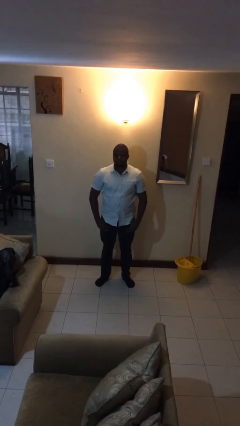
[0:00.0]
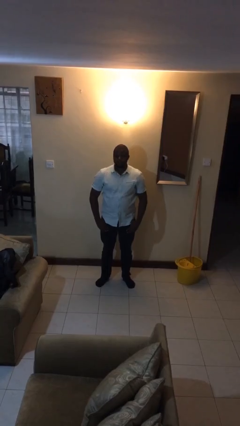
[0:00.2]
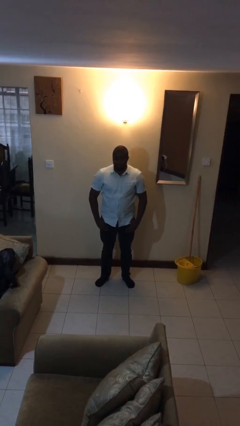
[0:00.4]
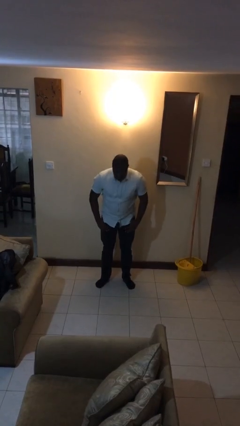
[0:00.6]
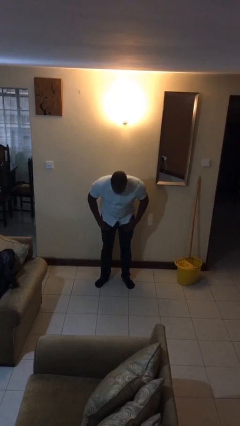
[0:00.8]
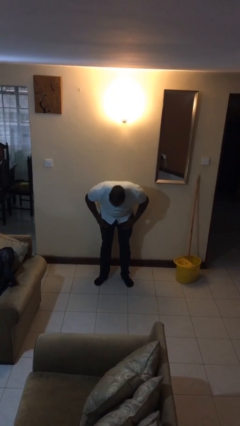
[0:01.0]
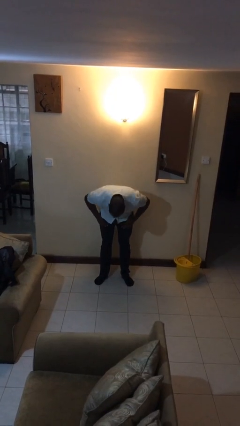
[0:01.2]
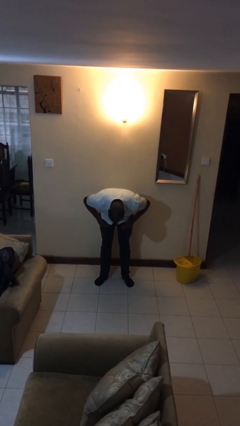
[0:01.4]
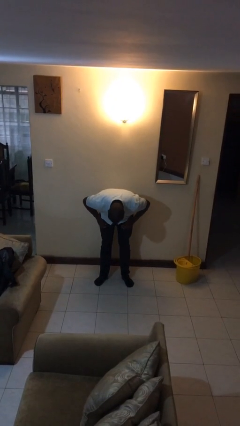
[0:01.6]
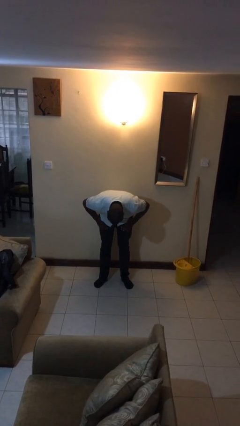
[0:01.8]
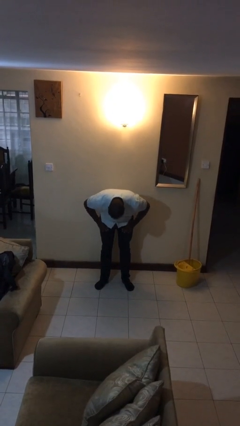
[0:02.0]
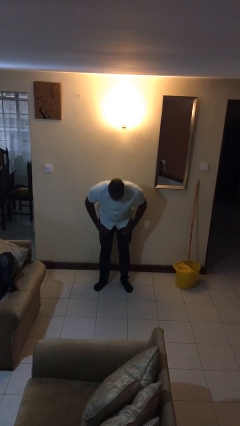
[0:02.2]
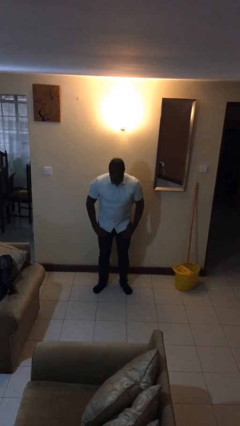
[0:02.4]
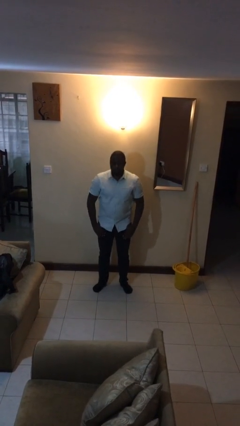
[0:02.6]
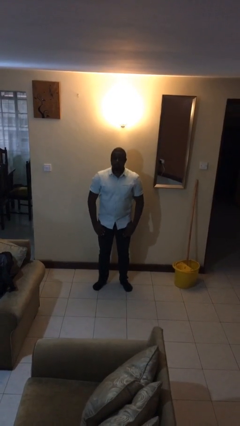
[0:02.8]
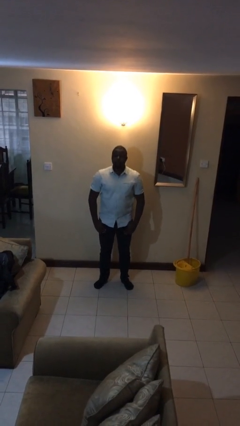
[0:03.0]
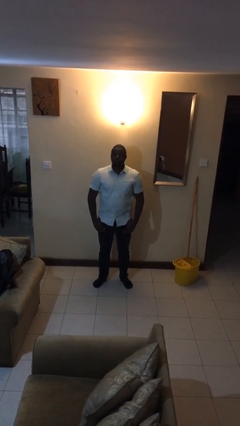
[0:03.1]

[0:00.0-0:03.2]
person bows

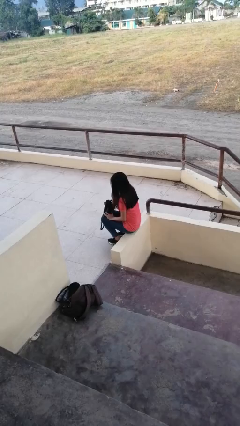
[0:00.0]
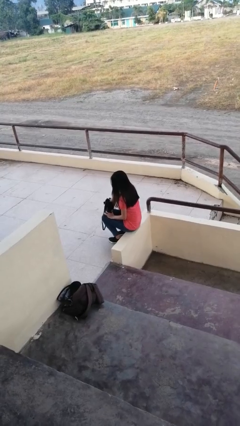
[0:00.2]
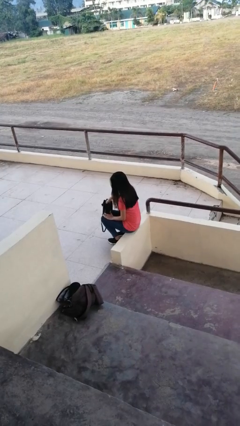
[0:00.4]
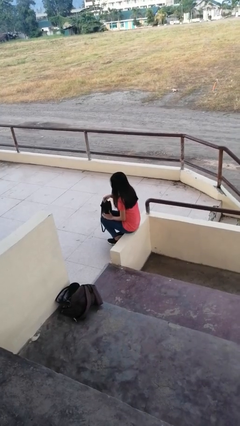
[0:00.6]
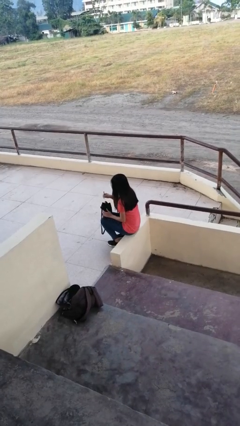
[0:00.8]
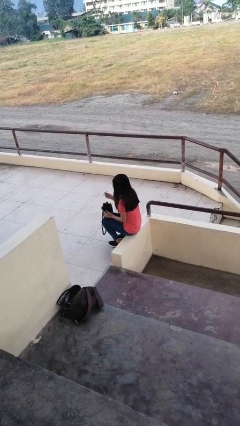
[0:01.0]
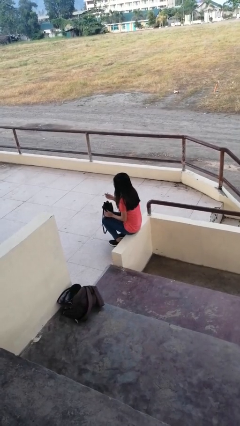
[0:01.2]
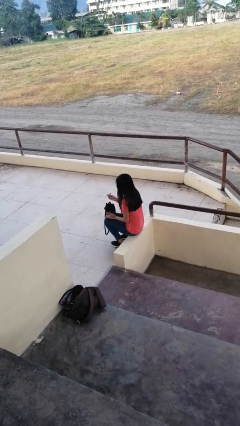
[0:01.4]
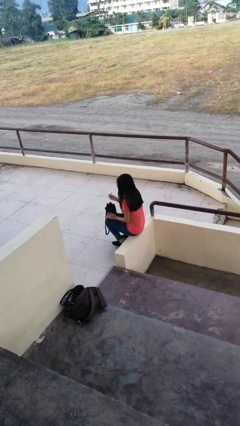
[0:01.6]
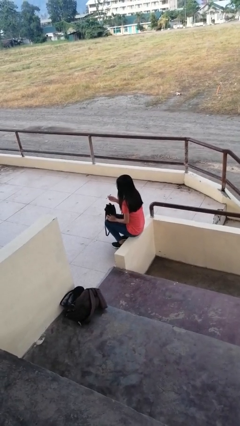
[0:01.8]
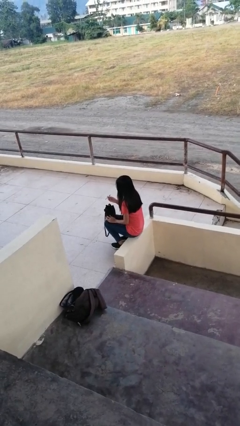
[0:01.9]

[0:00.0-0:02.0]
person takes object from purse

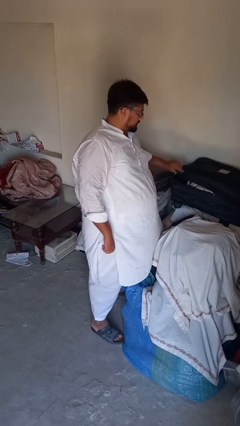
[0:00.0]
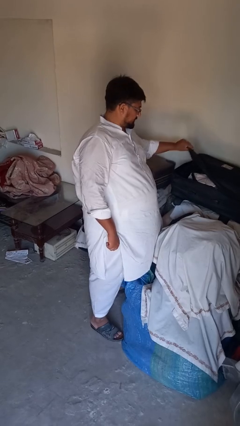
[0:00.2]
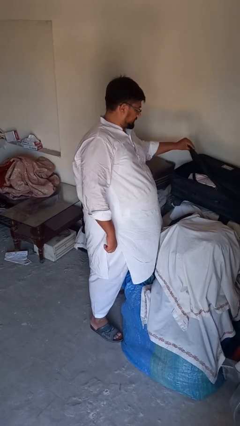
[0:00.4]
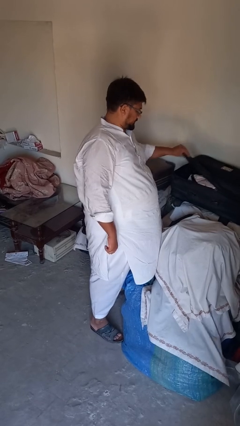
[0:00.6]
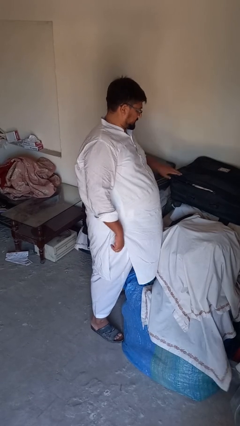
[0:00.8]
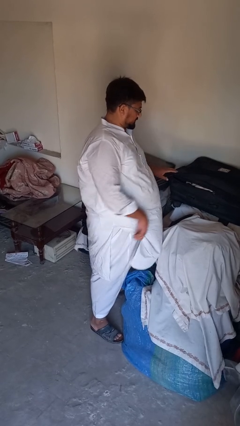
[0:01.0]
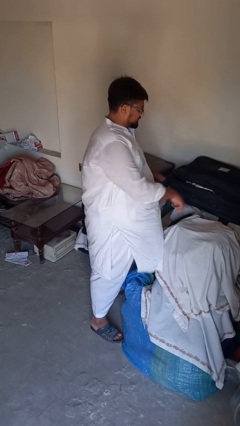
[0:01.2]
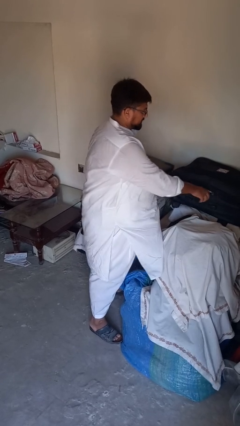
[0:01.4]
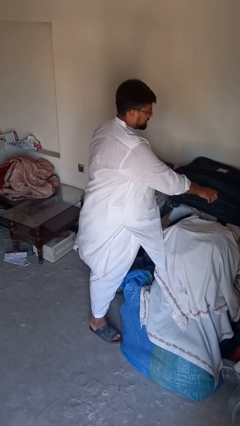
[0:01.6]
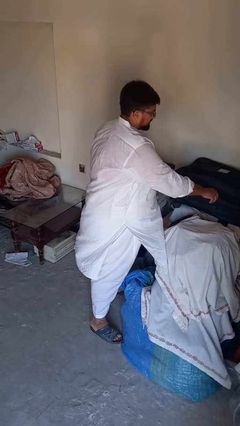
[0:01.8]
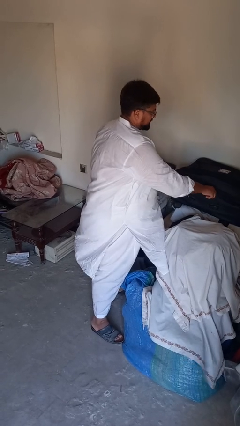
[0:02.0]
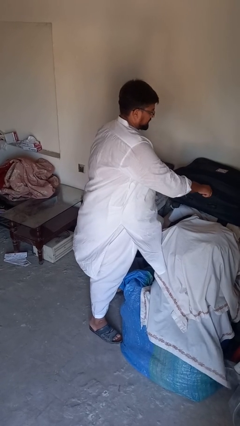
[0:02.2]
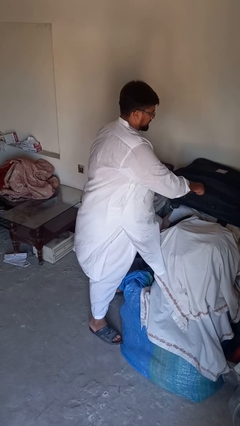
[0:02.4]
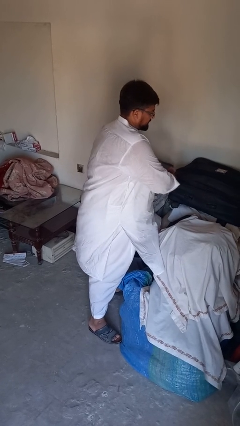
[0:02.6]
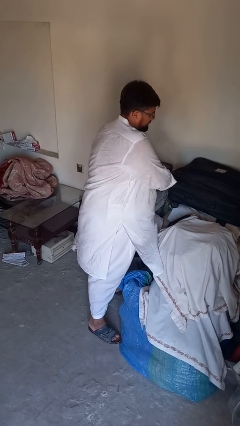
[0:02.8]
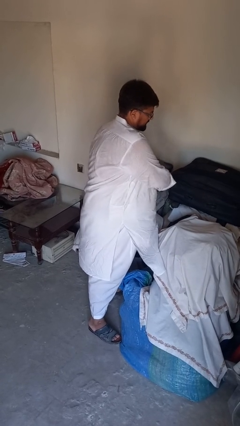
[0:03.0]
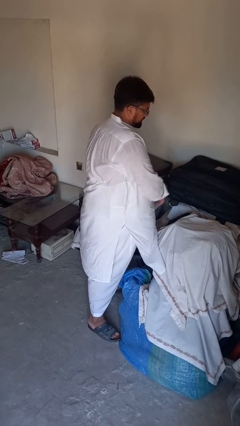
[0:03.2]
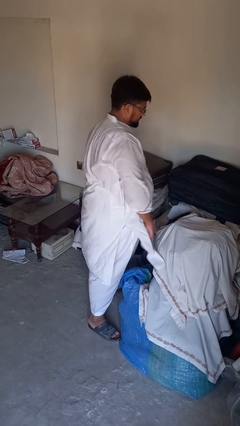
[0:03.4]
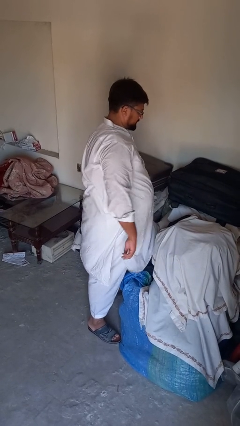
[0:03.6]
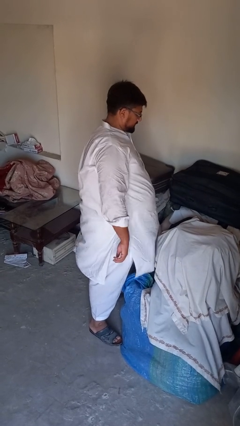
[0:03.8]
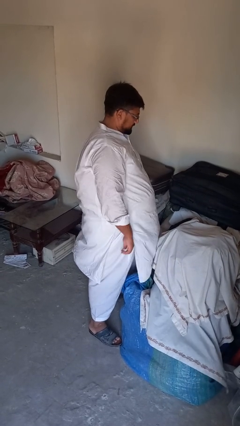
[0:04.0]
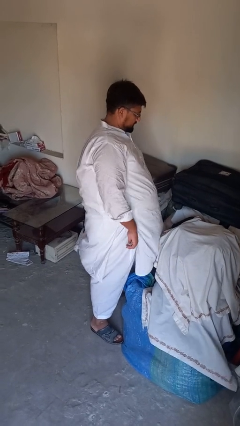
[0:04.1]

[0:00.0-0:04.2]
person closes suitcase

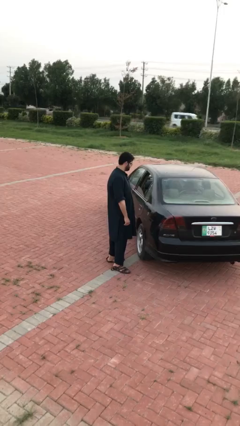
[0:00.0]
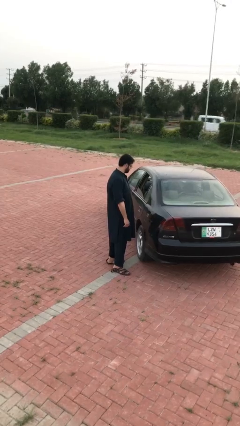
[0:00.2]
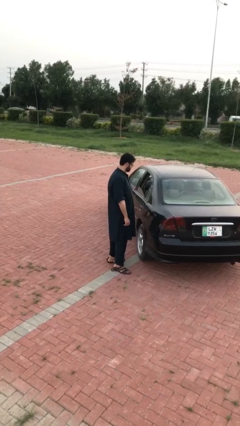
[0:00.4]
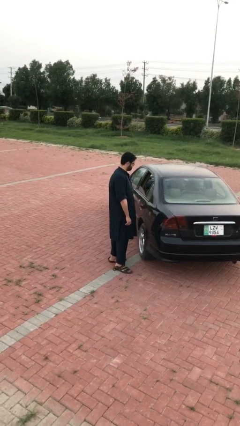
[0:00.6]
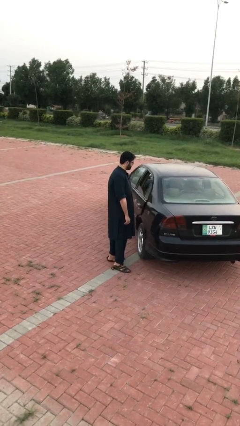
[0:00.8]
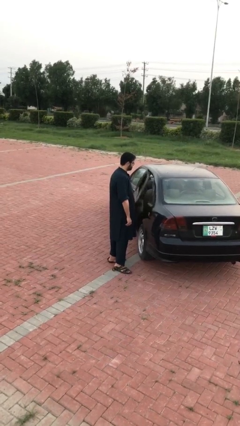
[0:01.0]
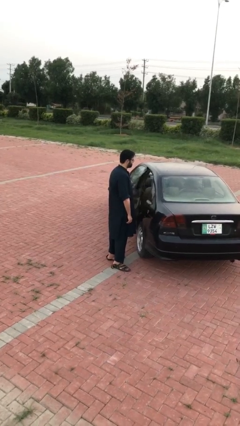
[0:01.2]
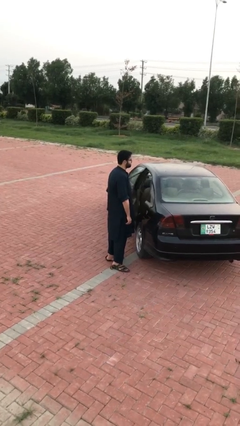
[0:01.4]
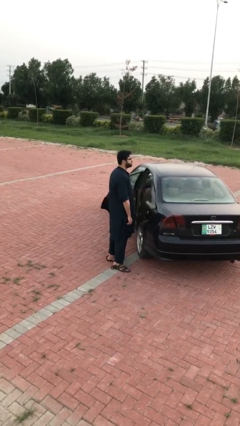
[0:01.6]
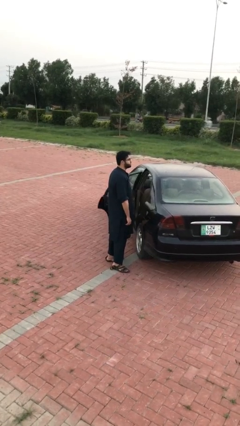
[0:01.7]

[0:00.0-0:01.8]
person opens car door

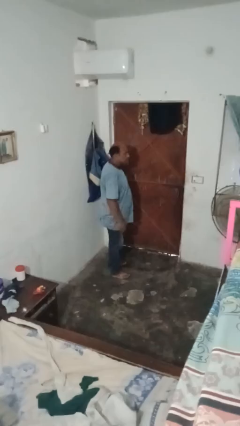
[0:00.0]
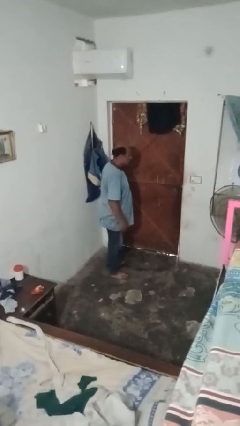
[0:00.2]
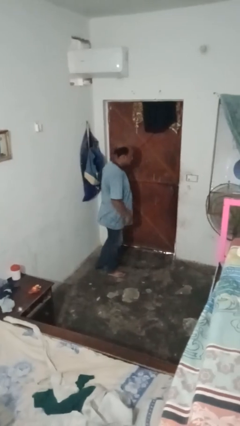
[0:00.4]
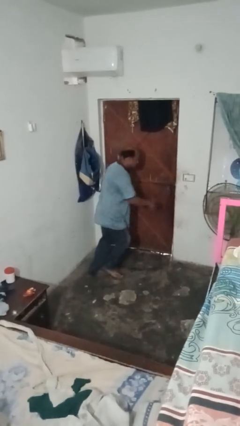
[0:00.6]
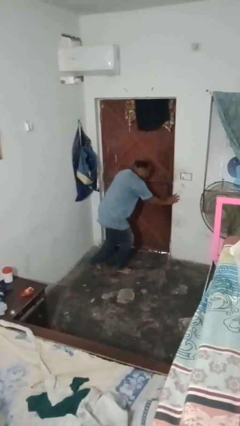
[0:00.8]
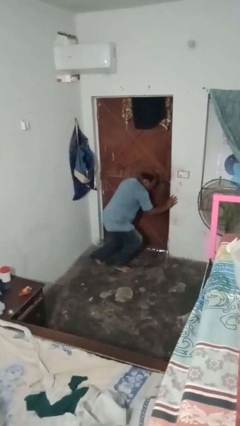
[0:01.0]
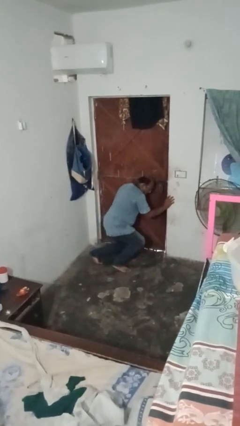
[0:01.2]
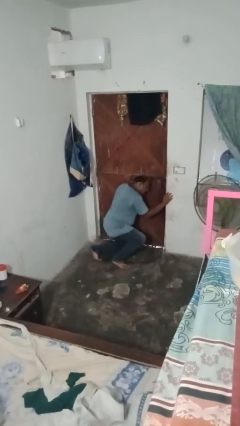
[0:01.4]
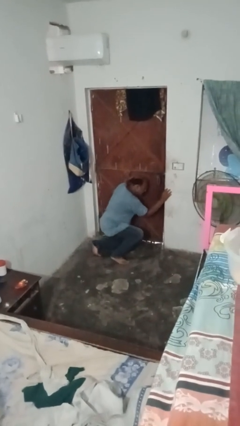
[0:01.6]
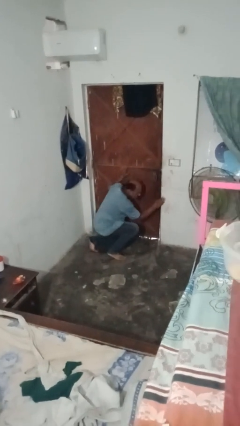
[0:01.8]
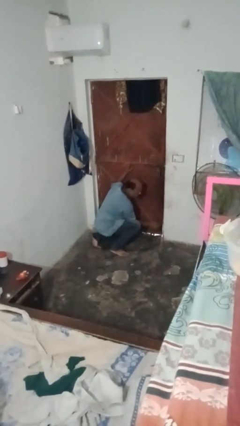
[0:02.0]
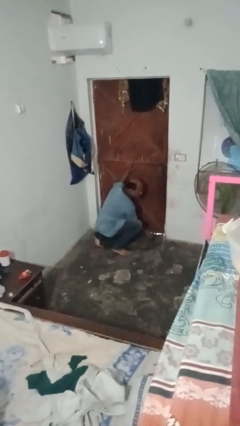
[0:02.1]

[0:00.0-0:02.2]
person bumps into wall

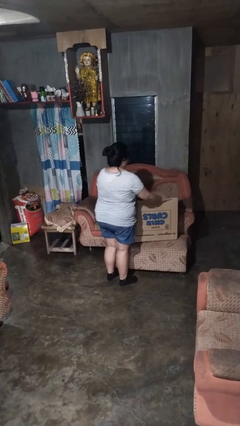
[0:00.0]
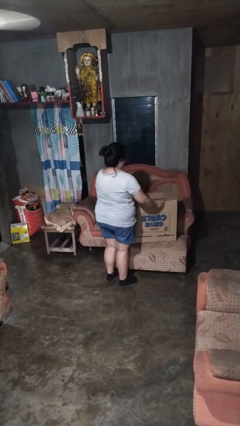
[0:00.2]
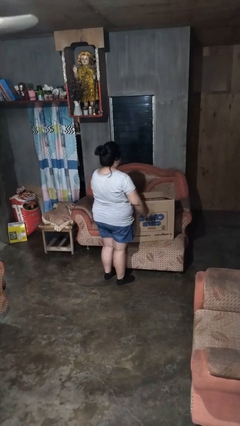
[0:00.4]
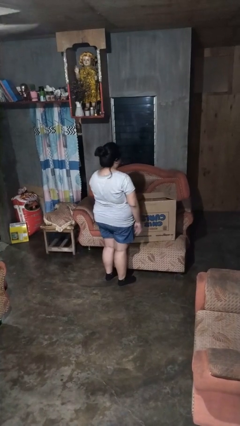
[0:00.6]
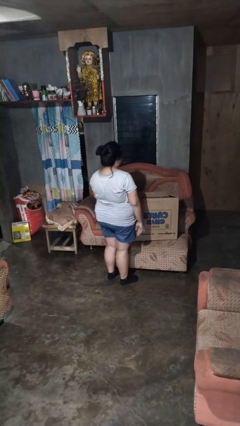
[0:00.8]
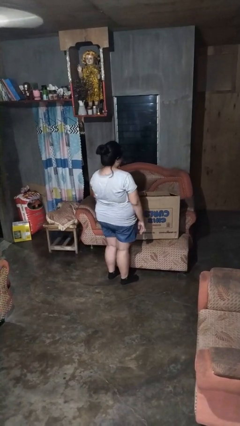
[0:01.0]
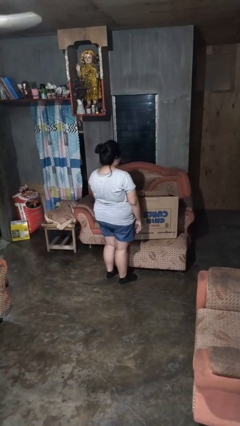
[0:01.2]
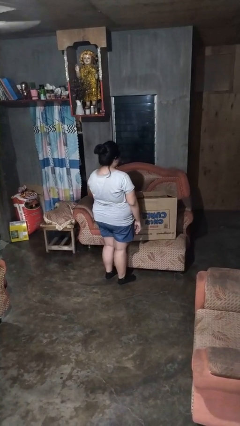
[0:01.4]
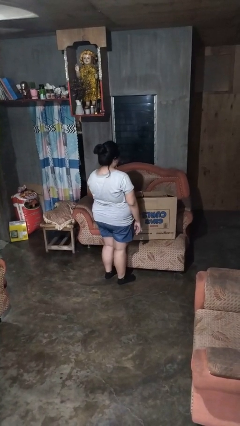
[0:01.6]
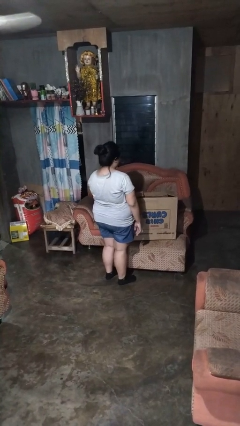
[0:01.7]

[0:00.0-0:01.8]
person opens box

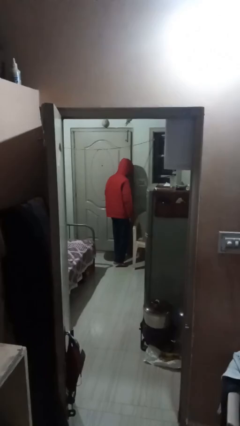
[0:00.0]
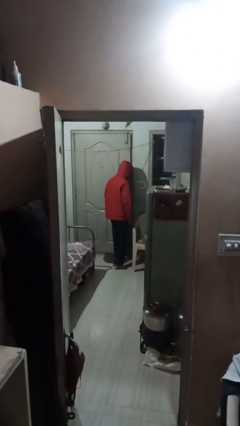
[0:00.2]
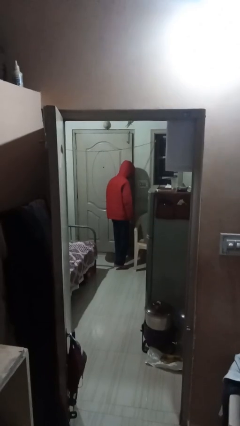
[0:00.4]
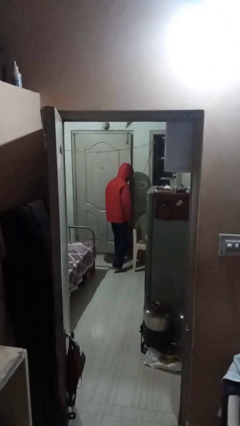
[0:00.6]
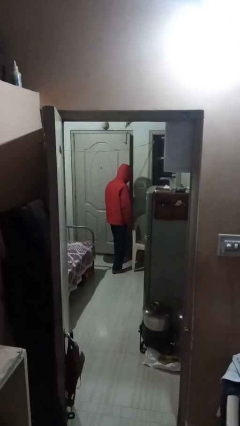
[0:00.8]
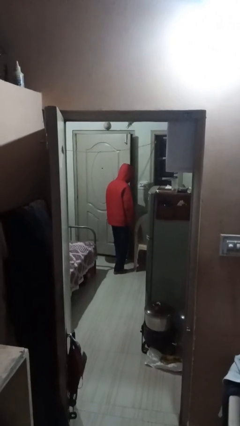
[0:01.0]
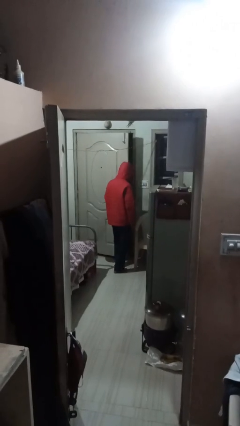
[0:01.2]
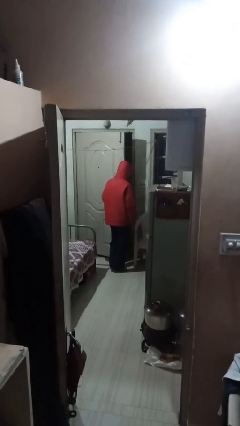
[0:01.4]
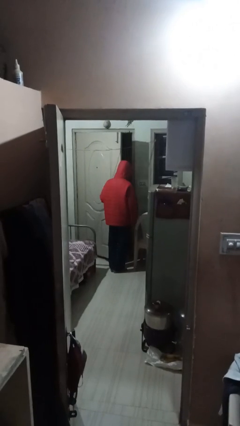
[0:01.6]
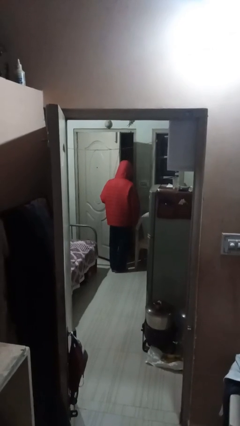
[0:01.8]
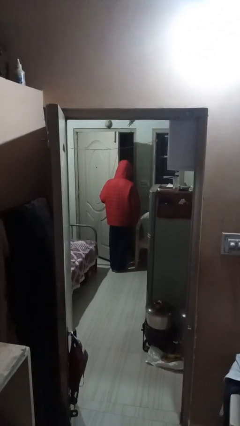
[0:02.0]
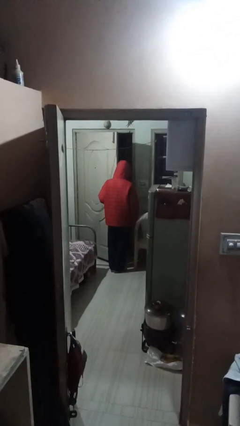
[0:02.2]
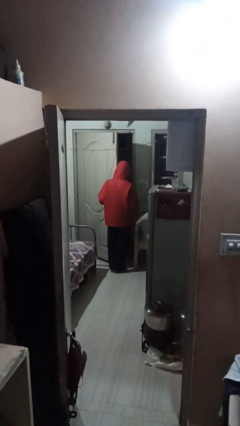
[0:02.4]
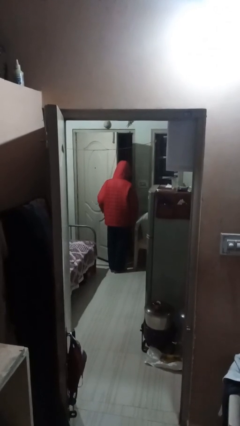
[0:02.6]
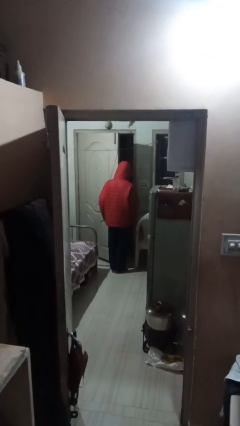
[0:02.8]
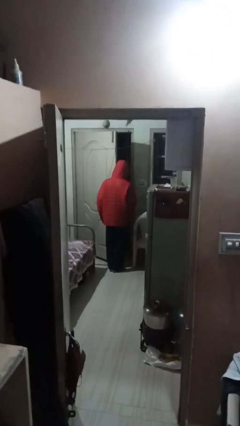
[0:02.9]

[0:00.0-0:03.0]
person opens facility door
